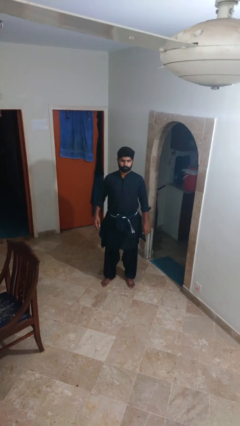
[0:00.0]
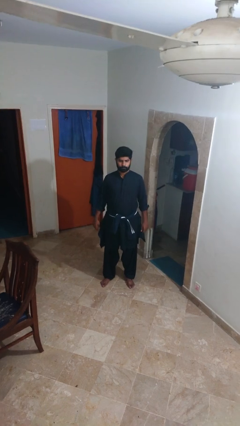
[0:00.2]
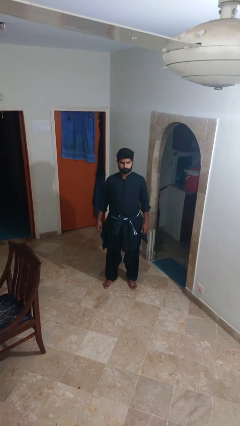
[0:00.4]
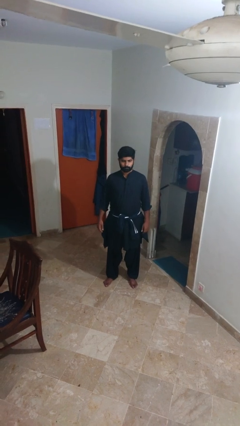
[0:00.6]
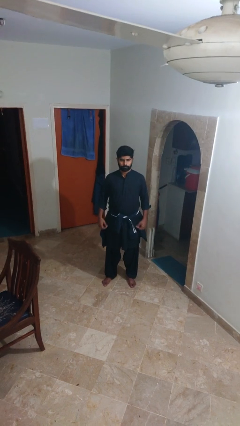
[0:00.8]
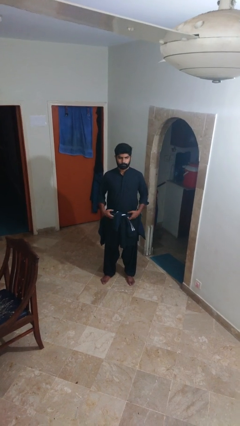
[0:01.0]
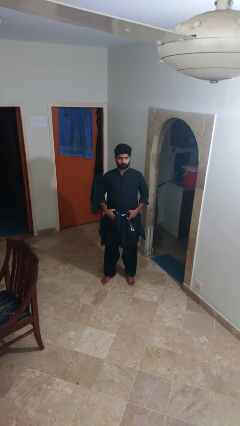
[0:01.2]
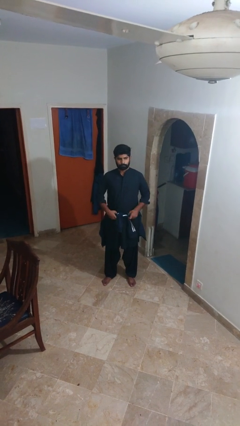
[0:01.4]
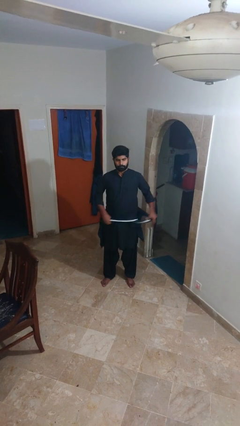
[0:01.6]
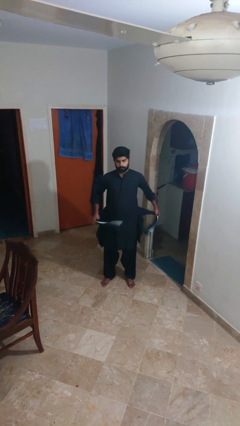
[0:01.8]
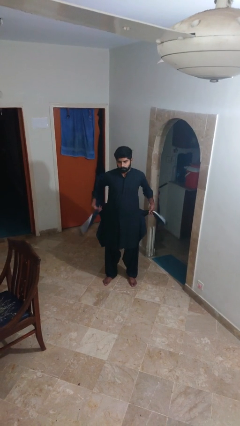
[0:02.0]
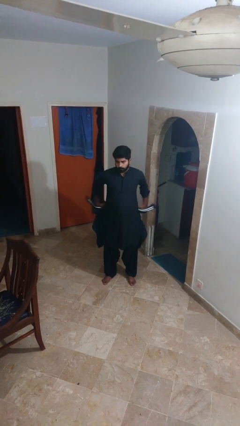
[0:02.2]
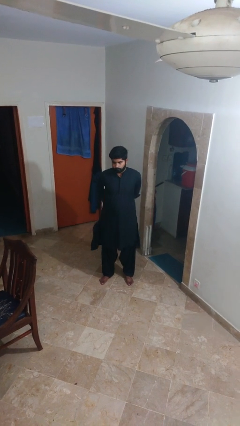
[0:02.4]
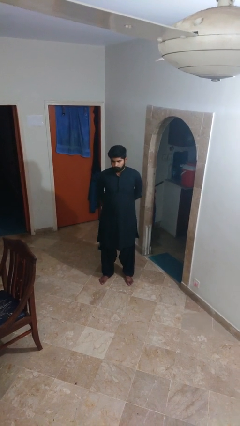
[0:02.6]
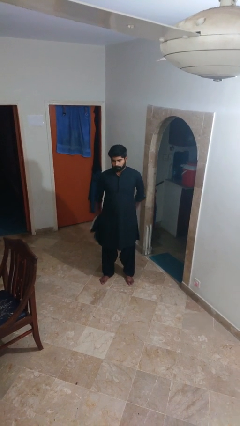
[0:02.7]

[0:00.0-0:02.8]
person unties jacket around waist

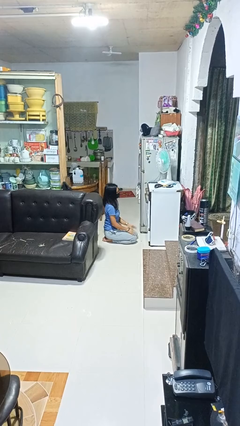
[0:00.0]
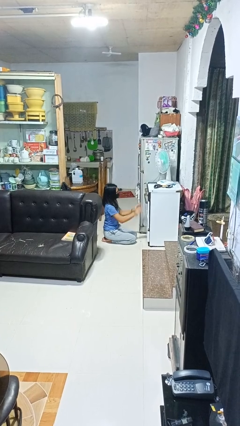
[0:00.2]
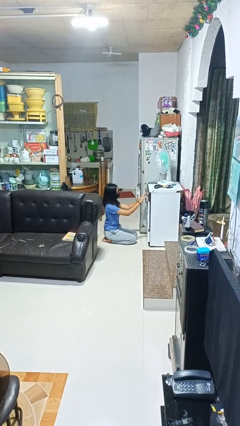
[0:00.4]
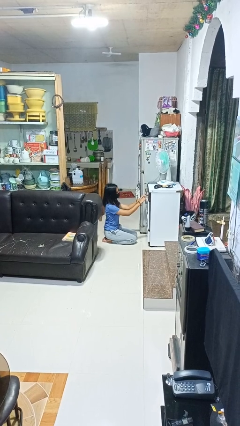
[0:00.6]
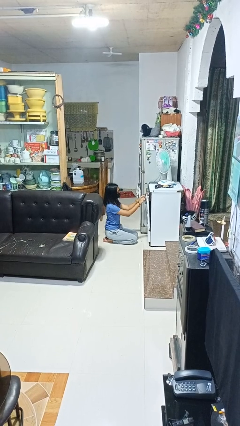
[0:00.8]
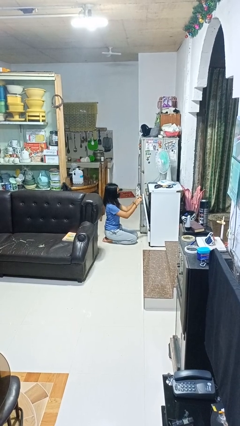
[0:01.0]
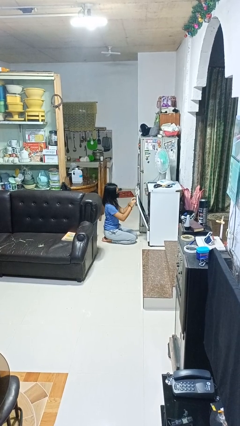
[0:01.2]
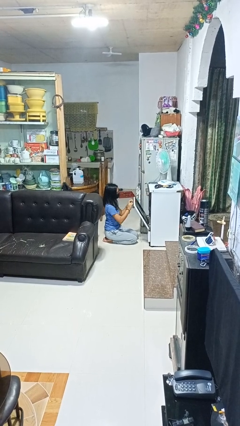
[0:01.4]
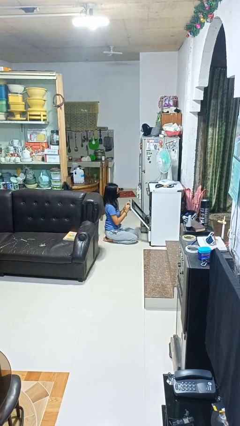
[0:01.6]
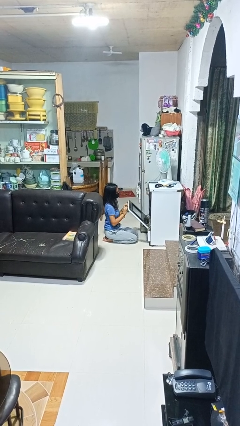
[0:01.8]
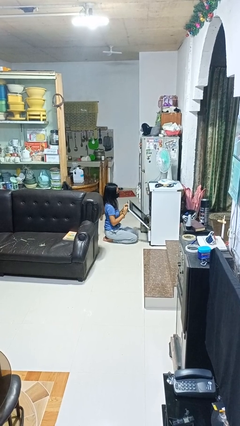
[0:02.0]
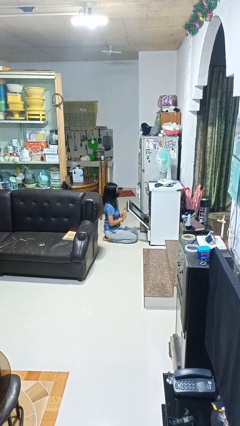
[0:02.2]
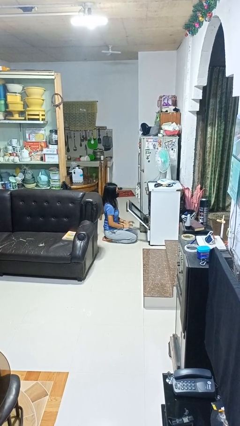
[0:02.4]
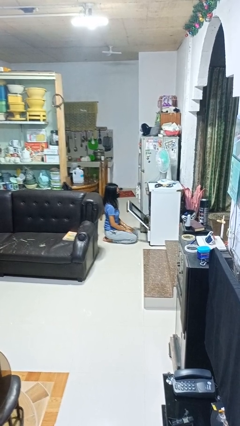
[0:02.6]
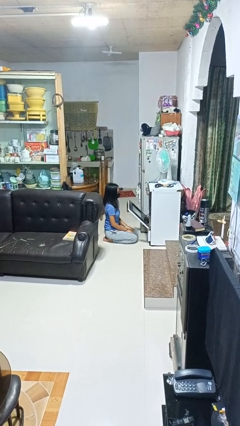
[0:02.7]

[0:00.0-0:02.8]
person opens oven door

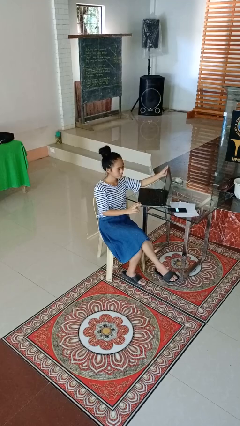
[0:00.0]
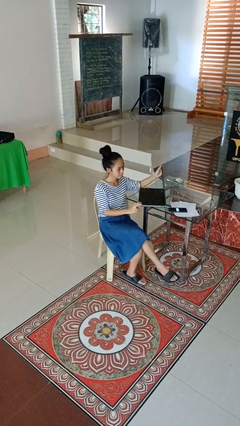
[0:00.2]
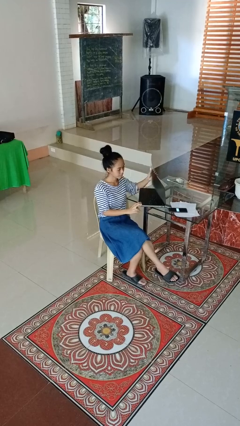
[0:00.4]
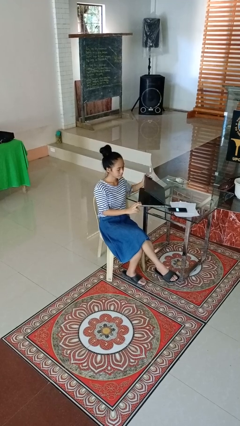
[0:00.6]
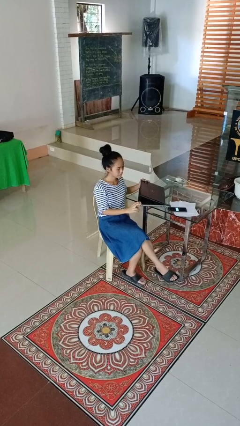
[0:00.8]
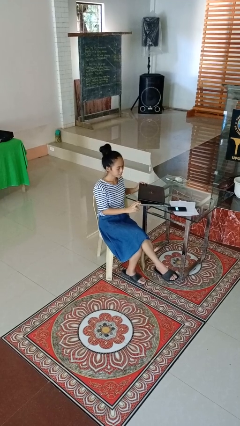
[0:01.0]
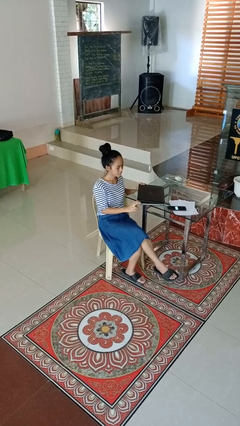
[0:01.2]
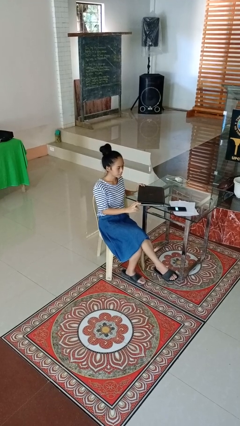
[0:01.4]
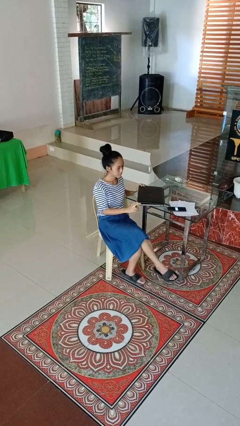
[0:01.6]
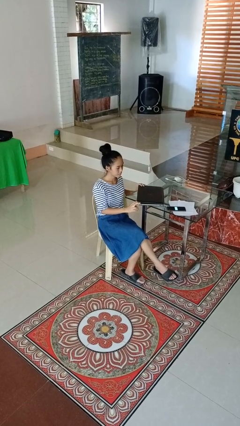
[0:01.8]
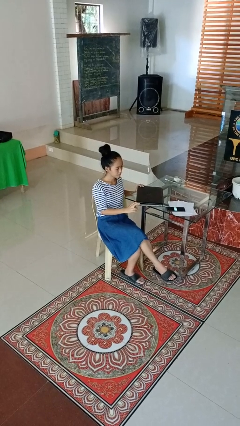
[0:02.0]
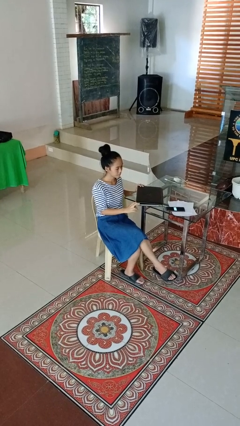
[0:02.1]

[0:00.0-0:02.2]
person closes laptop

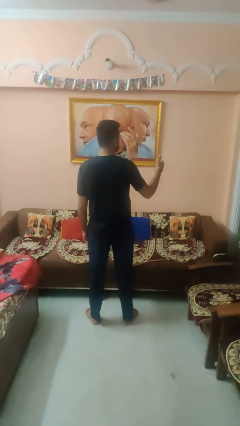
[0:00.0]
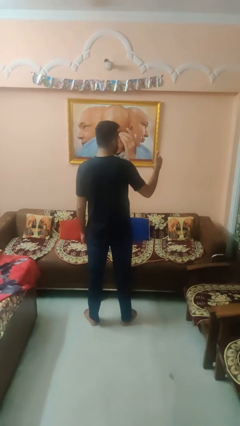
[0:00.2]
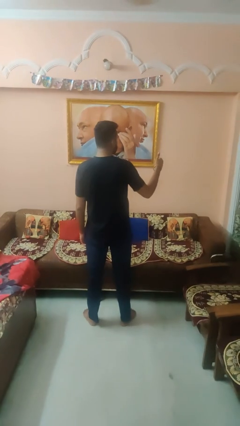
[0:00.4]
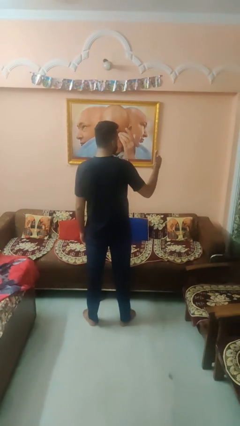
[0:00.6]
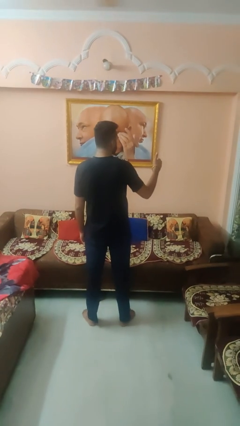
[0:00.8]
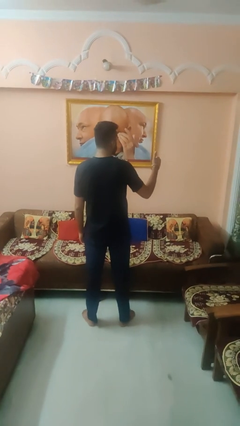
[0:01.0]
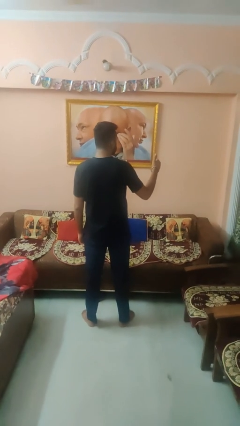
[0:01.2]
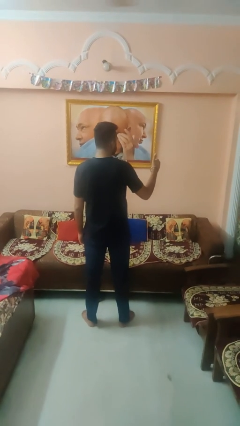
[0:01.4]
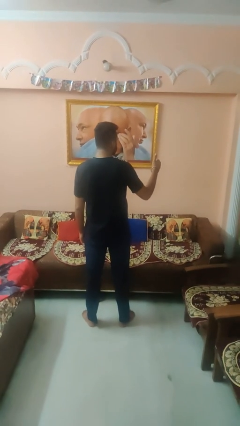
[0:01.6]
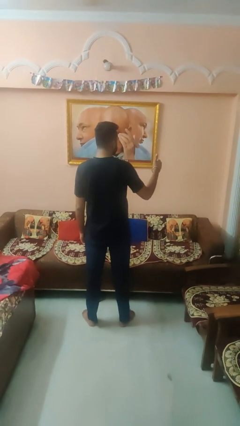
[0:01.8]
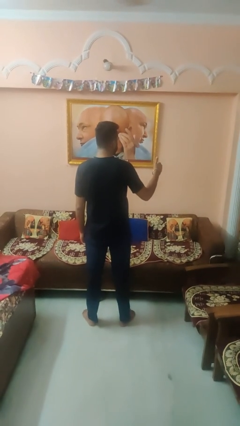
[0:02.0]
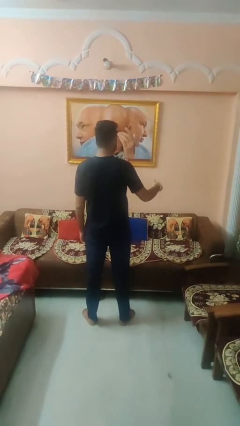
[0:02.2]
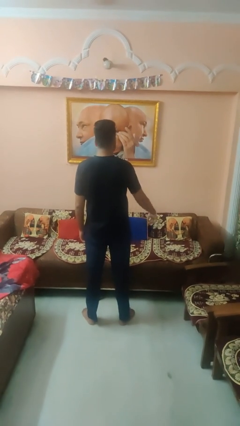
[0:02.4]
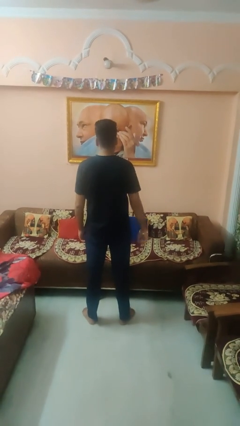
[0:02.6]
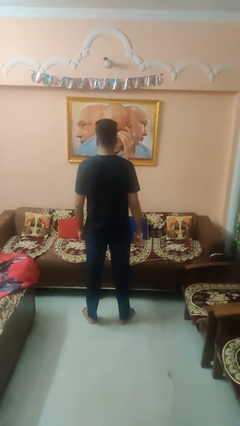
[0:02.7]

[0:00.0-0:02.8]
person gestures thumbs up

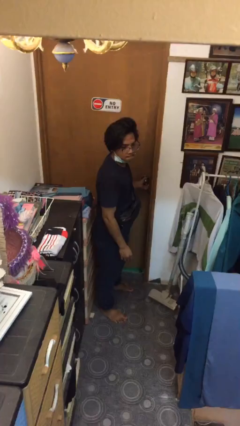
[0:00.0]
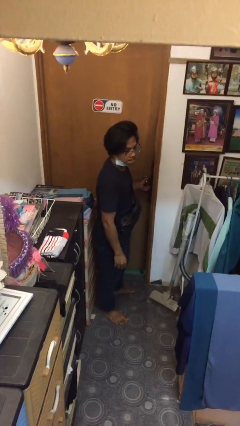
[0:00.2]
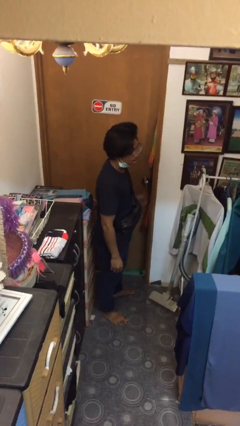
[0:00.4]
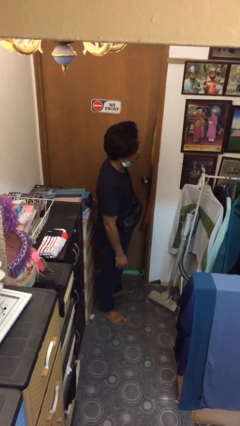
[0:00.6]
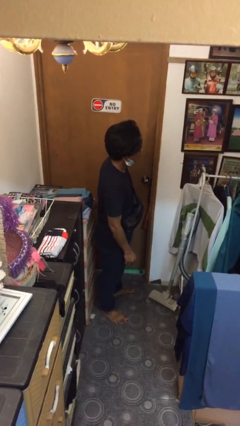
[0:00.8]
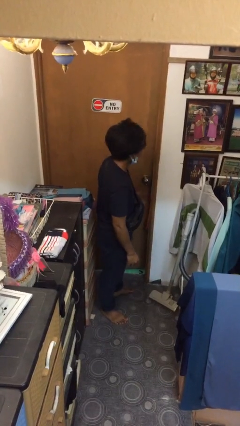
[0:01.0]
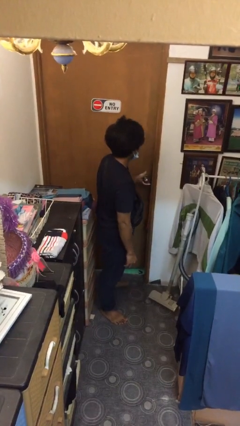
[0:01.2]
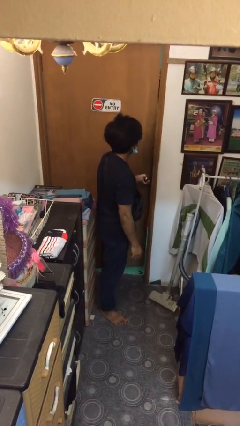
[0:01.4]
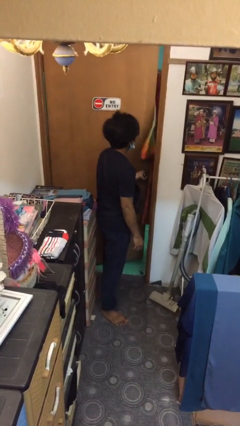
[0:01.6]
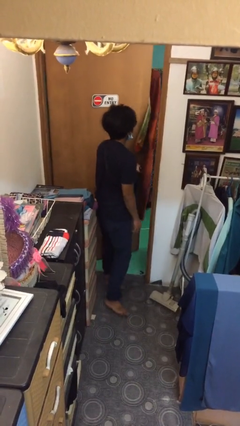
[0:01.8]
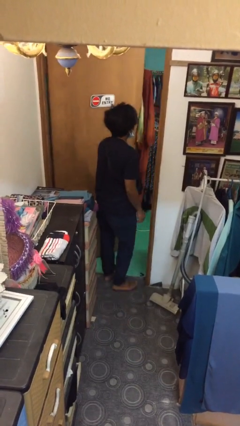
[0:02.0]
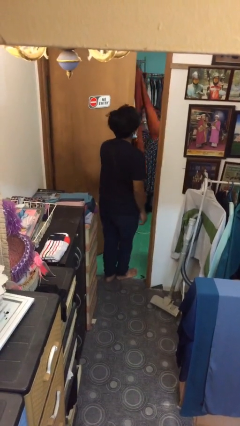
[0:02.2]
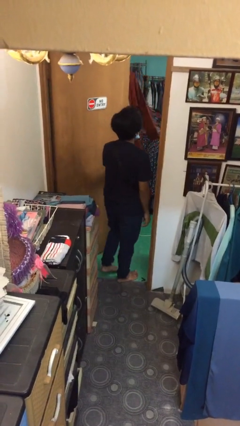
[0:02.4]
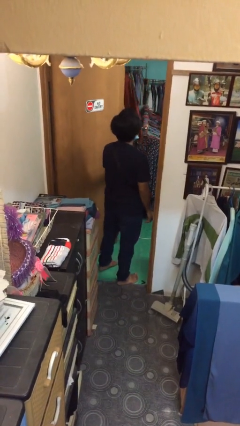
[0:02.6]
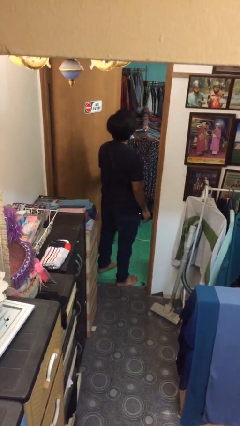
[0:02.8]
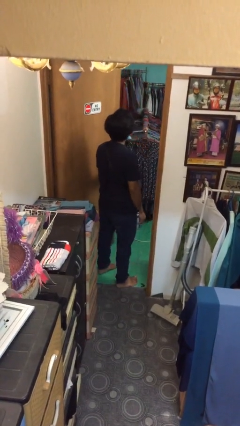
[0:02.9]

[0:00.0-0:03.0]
person opens facility door

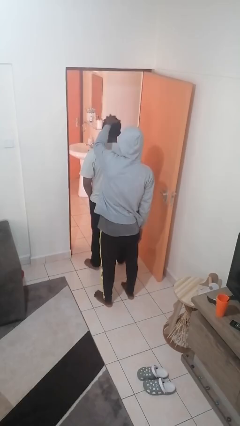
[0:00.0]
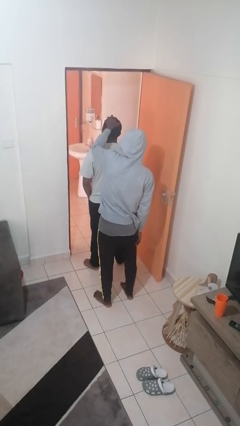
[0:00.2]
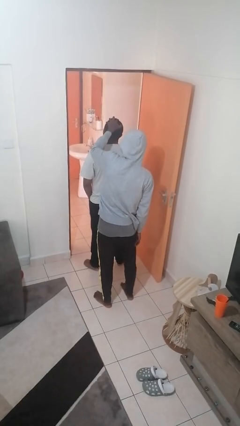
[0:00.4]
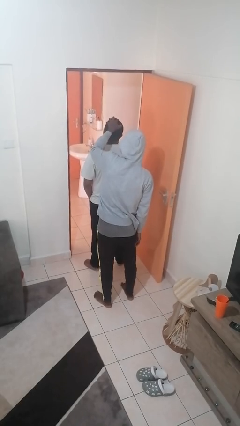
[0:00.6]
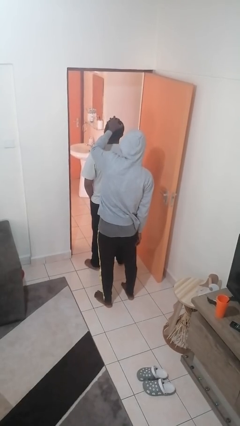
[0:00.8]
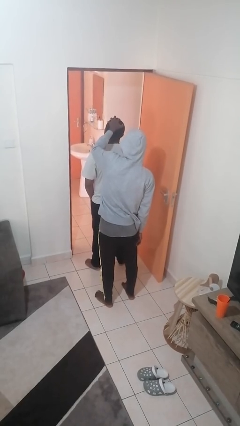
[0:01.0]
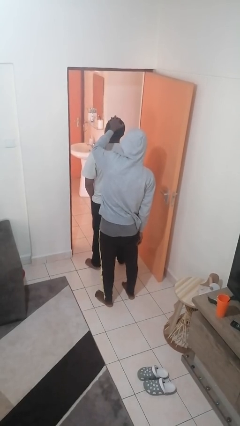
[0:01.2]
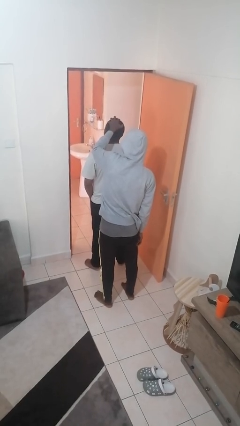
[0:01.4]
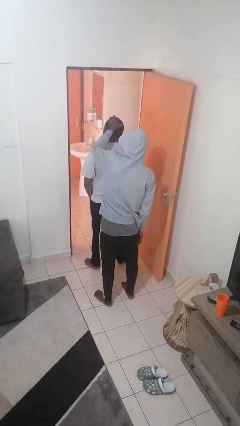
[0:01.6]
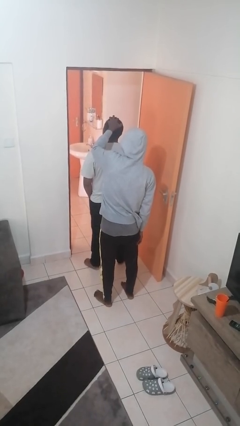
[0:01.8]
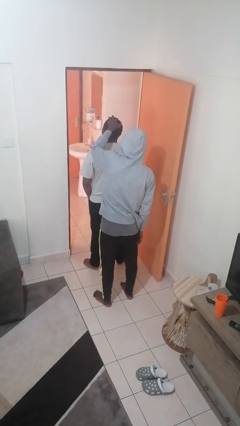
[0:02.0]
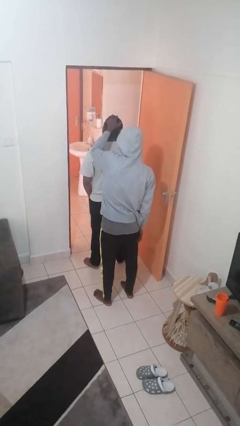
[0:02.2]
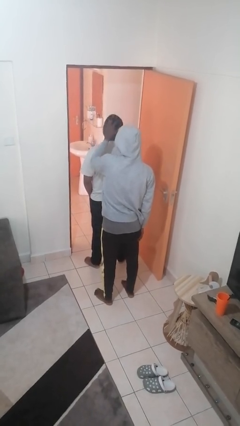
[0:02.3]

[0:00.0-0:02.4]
person grabs person by hair

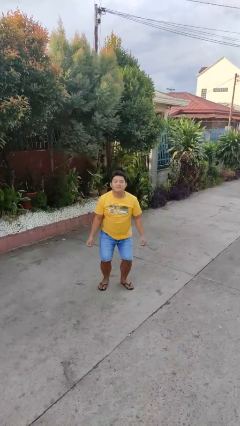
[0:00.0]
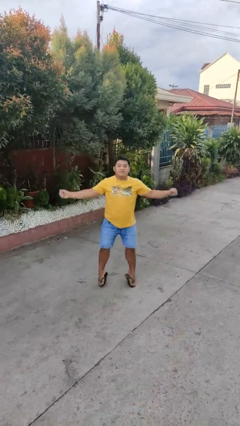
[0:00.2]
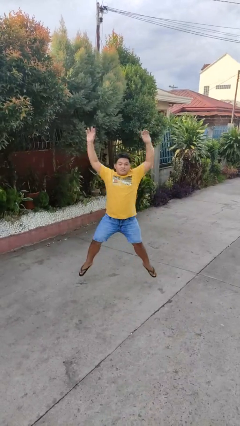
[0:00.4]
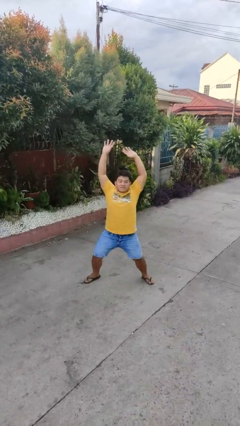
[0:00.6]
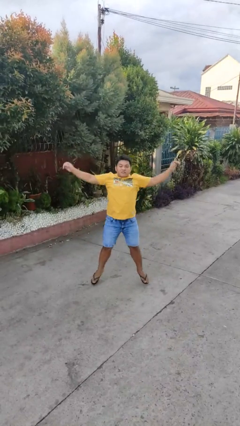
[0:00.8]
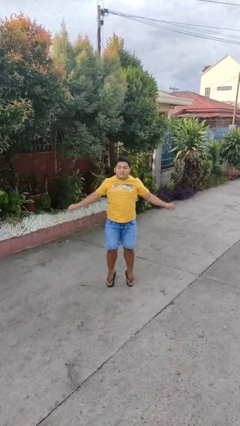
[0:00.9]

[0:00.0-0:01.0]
person exercises with jumping jacks
